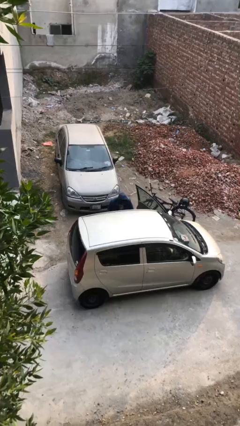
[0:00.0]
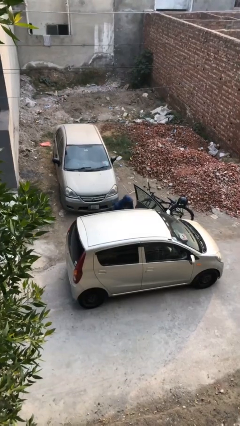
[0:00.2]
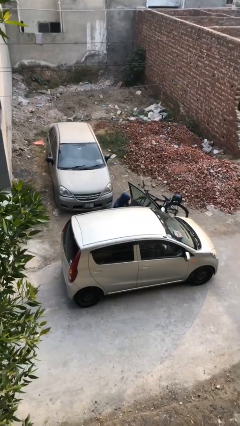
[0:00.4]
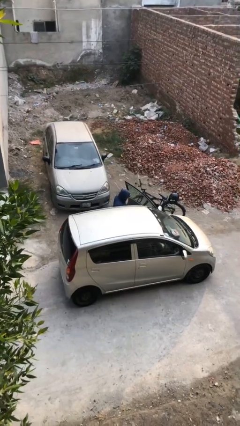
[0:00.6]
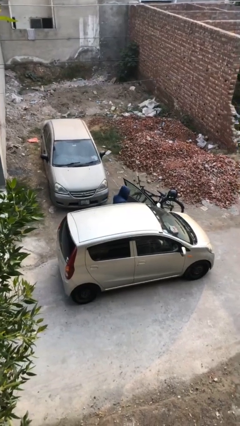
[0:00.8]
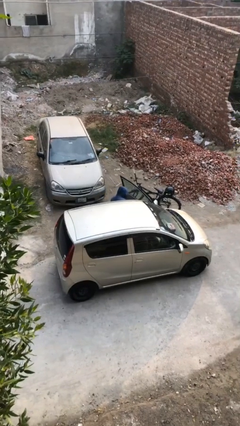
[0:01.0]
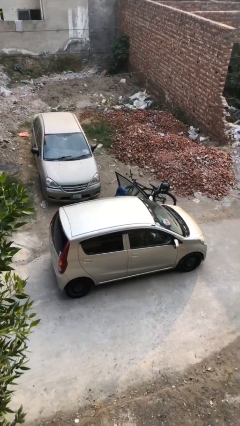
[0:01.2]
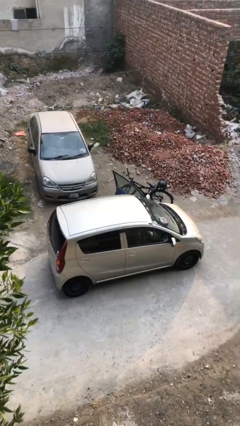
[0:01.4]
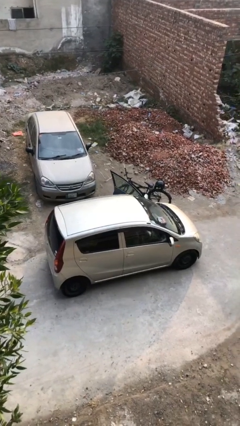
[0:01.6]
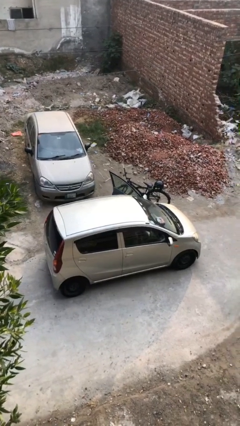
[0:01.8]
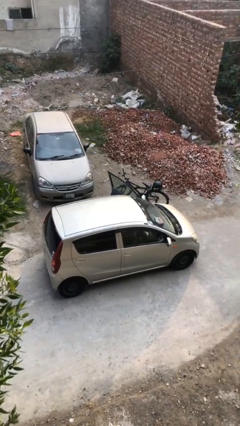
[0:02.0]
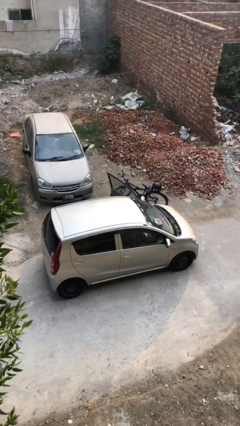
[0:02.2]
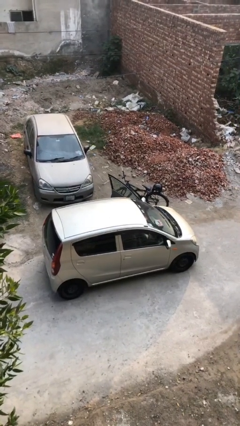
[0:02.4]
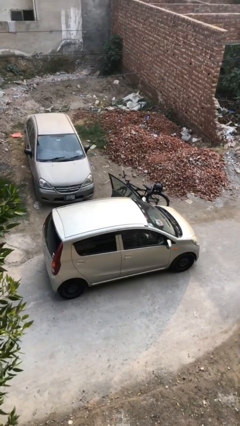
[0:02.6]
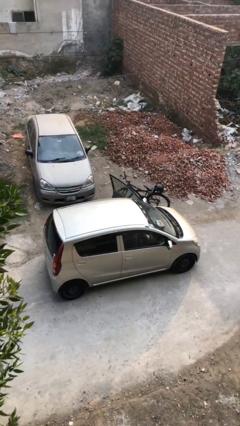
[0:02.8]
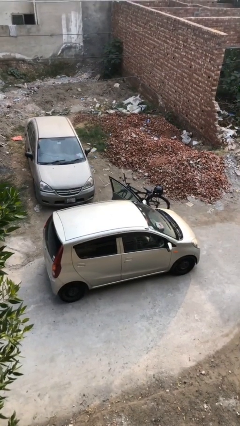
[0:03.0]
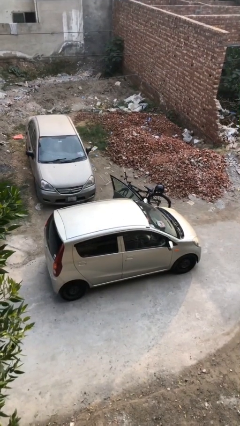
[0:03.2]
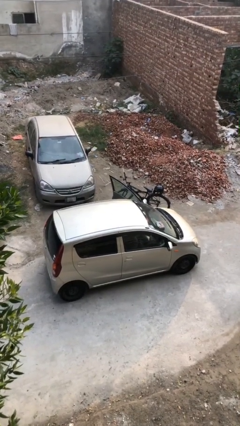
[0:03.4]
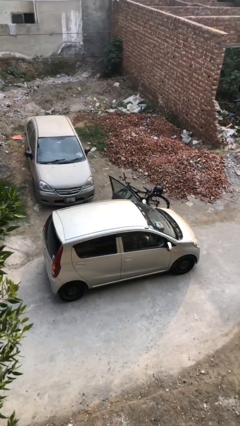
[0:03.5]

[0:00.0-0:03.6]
person enters car

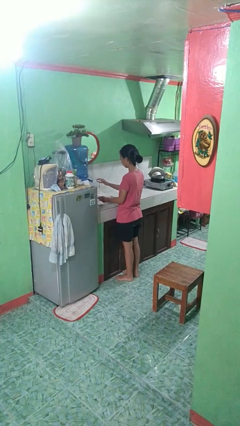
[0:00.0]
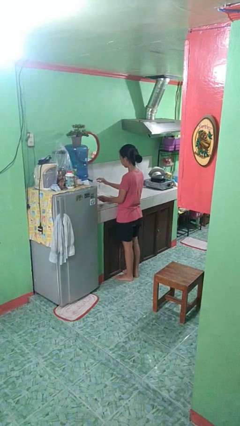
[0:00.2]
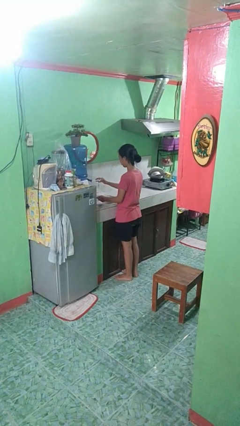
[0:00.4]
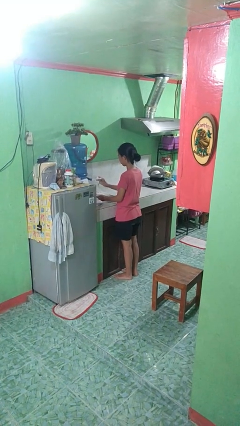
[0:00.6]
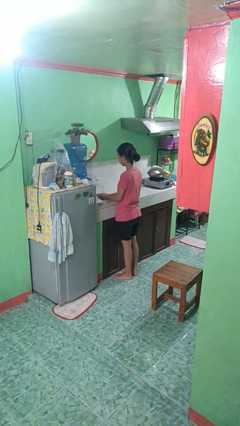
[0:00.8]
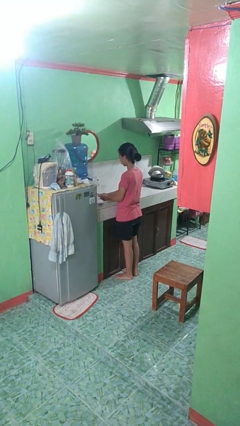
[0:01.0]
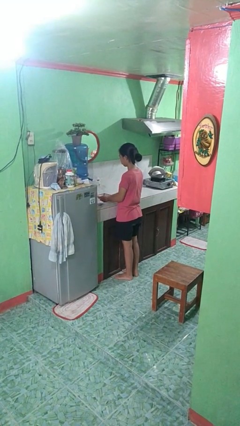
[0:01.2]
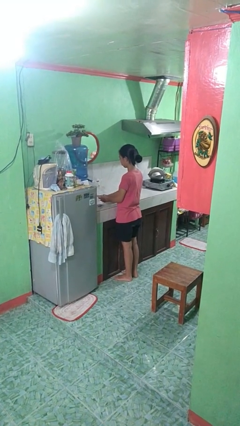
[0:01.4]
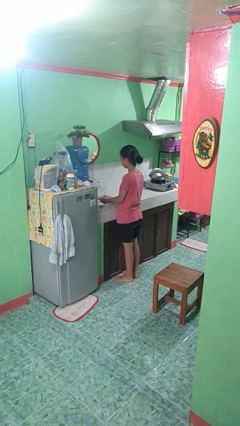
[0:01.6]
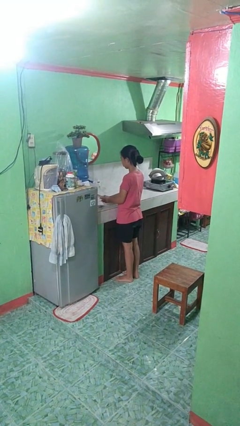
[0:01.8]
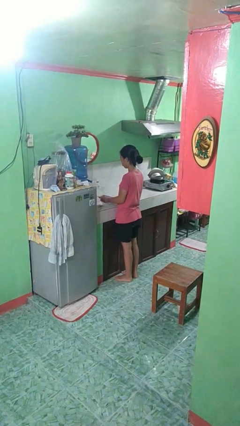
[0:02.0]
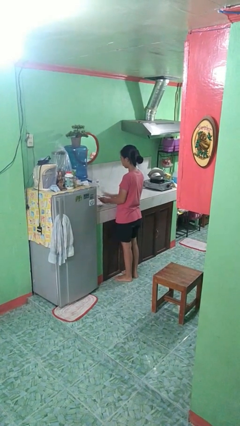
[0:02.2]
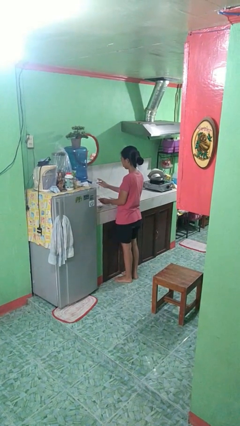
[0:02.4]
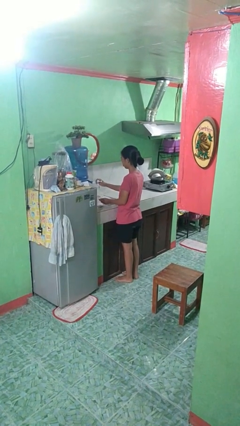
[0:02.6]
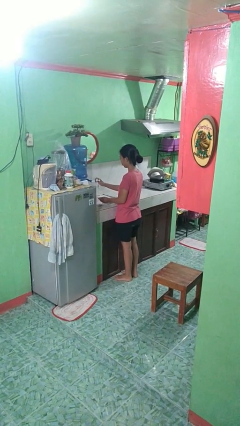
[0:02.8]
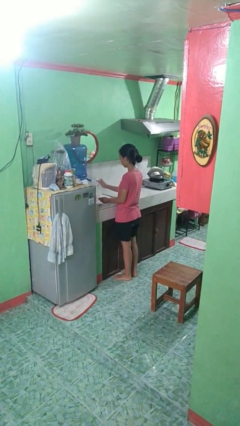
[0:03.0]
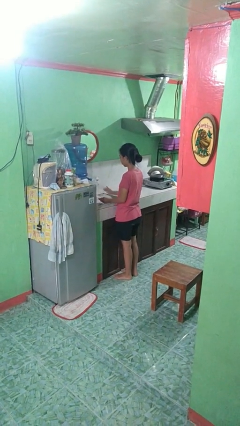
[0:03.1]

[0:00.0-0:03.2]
person washes dish

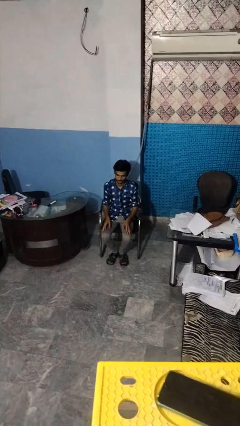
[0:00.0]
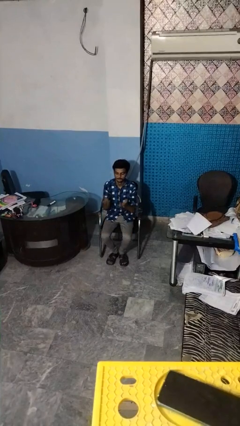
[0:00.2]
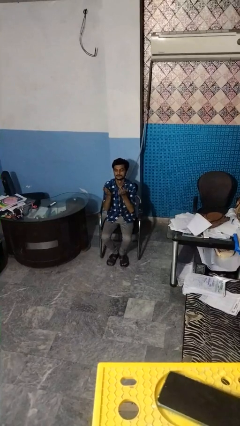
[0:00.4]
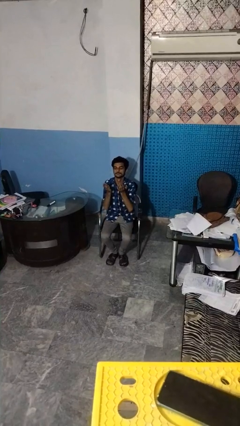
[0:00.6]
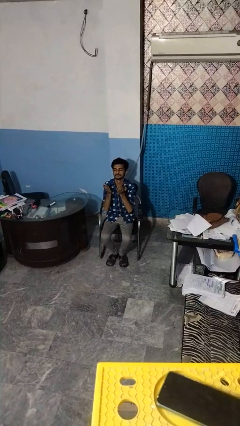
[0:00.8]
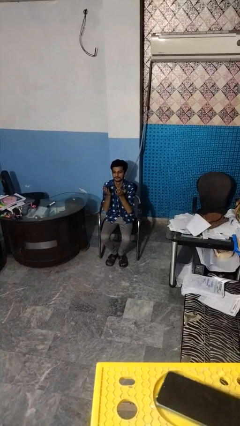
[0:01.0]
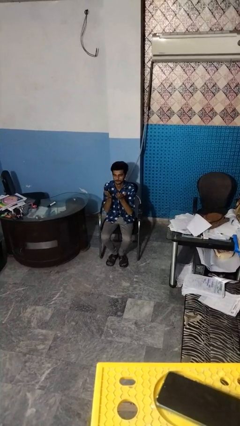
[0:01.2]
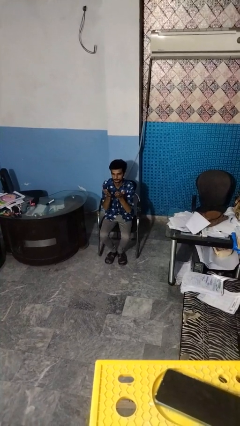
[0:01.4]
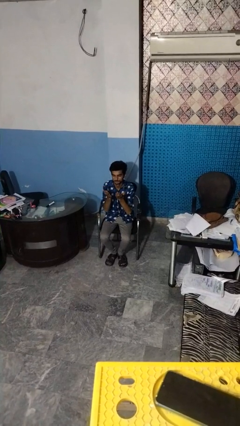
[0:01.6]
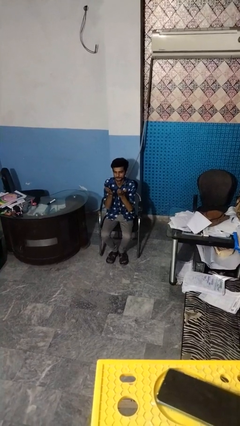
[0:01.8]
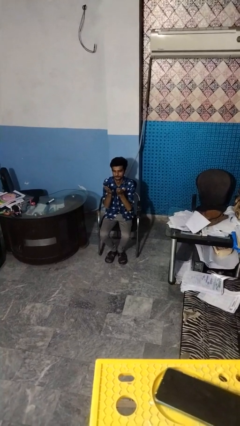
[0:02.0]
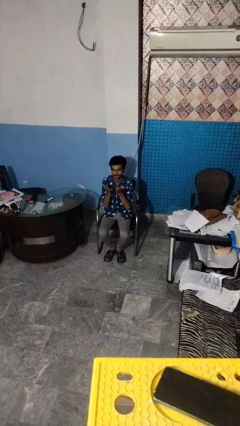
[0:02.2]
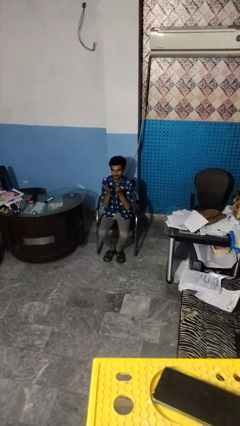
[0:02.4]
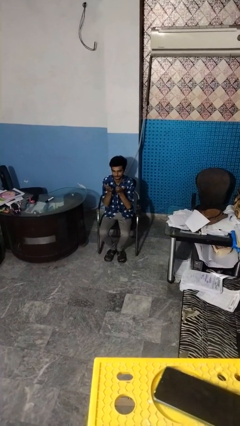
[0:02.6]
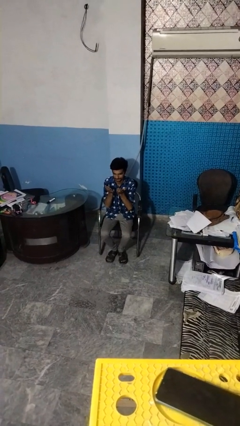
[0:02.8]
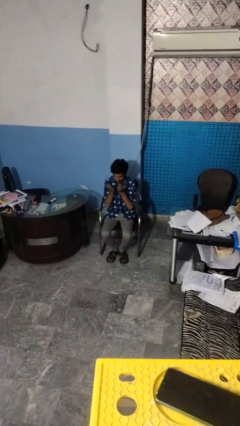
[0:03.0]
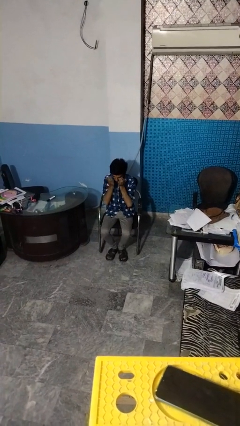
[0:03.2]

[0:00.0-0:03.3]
person prays

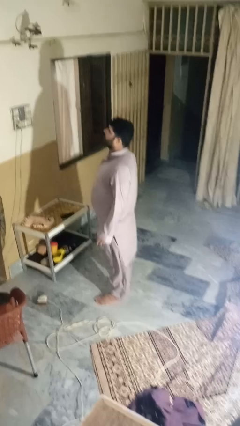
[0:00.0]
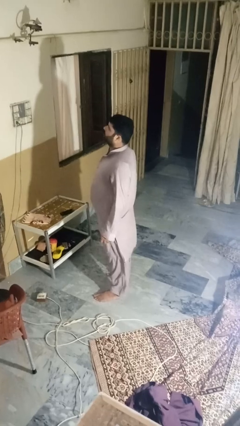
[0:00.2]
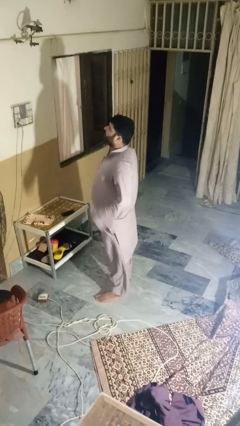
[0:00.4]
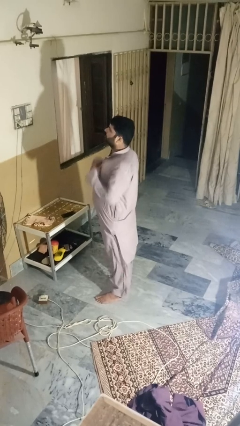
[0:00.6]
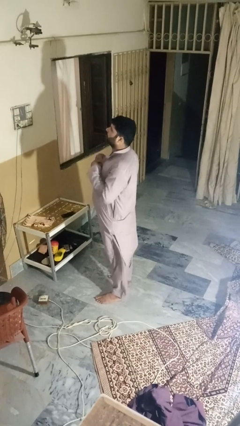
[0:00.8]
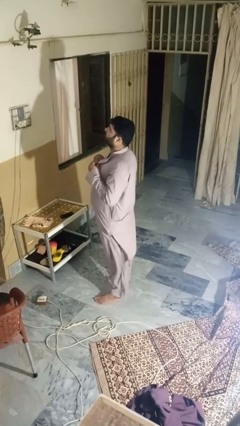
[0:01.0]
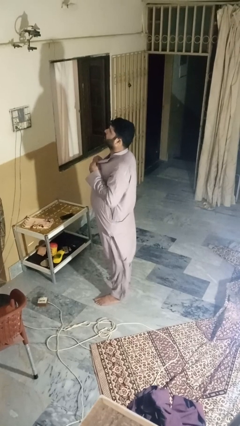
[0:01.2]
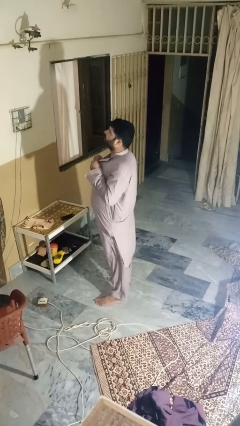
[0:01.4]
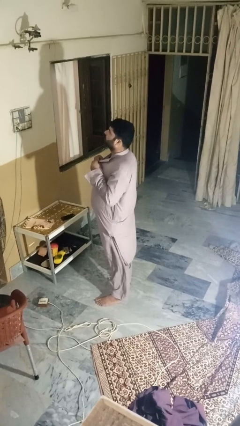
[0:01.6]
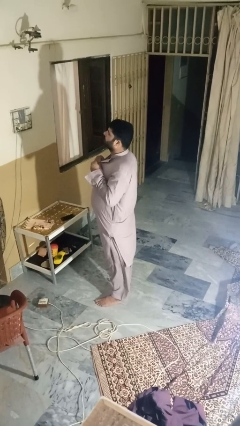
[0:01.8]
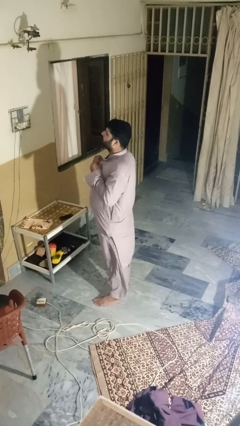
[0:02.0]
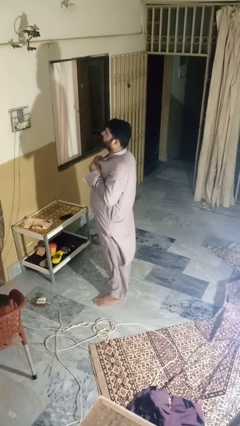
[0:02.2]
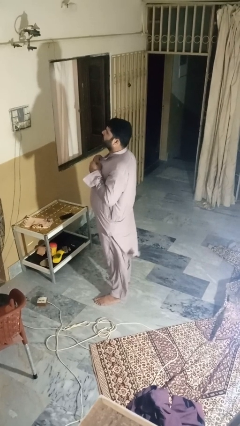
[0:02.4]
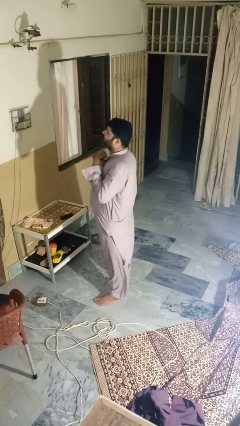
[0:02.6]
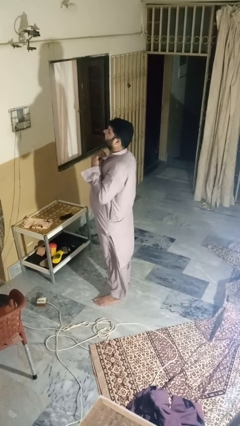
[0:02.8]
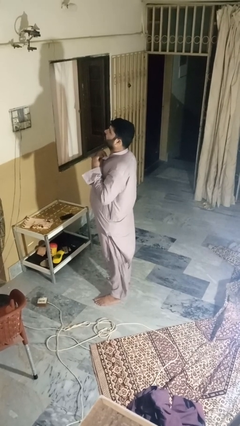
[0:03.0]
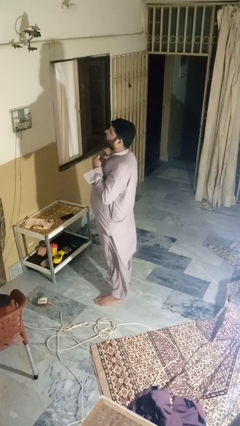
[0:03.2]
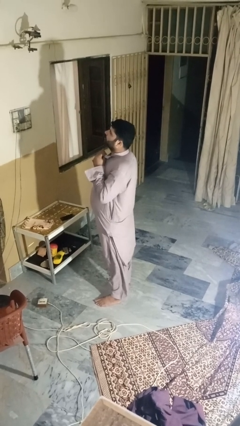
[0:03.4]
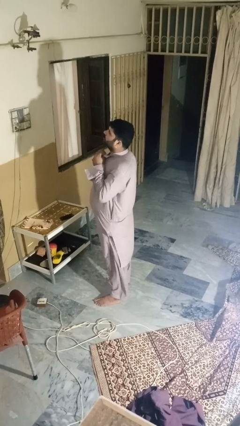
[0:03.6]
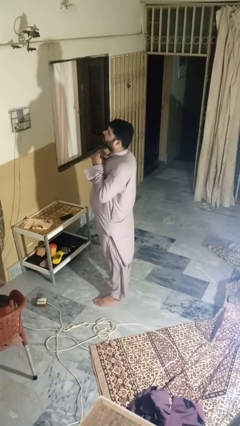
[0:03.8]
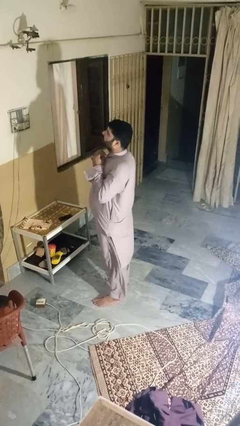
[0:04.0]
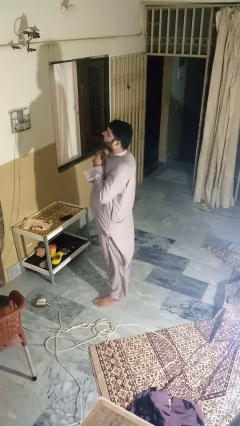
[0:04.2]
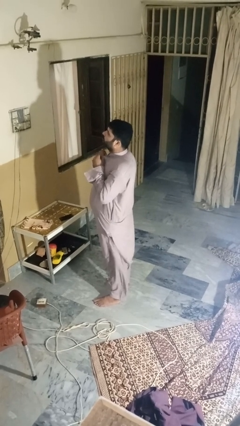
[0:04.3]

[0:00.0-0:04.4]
person buttons shirt

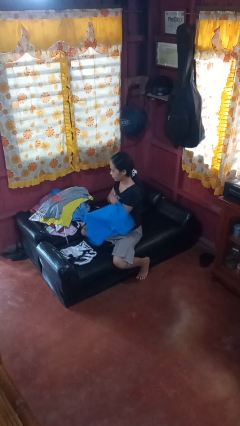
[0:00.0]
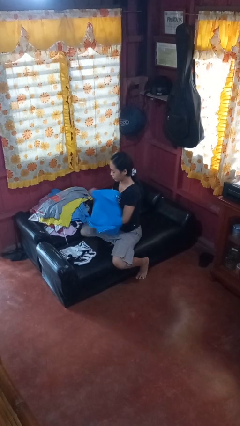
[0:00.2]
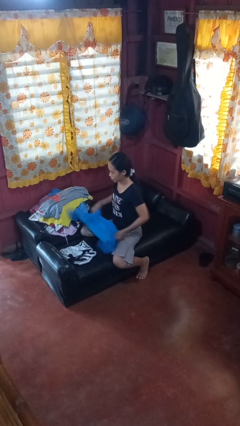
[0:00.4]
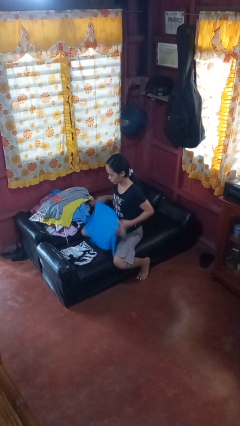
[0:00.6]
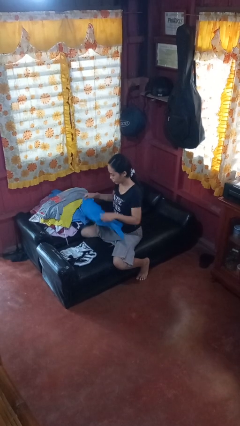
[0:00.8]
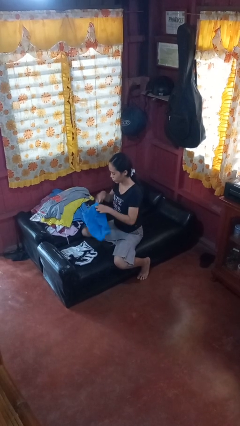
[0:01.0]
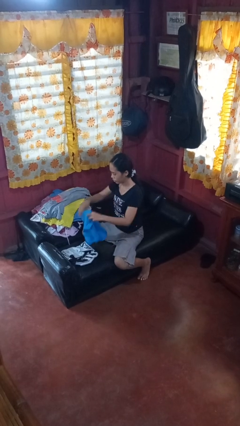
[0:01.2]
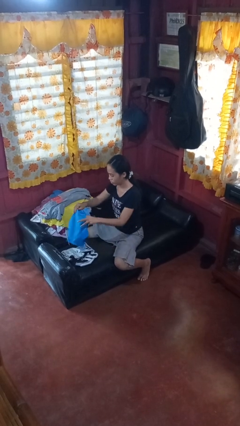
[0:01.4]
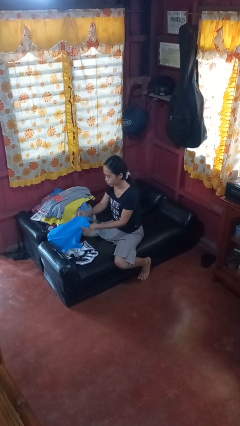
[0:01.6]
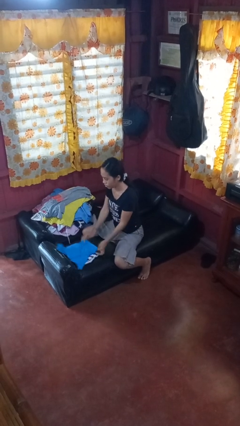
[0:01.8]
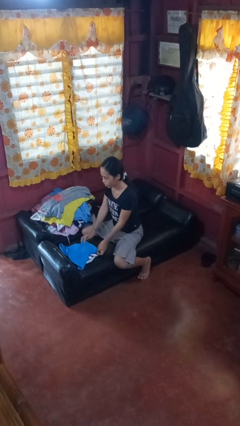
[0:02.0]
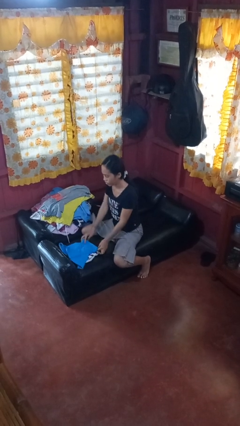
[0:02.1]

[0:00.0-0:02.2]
person folds shirt

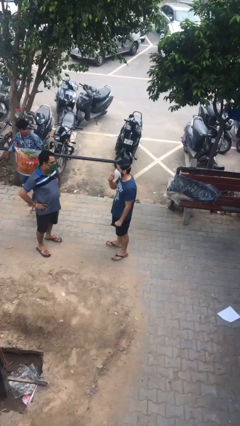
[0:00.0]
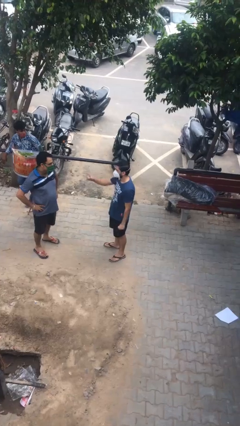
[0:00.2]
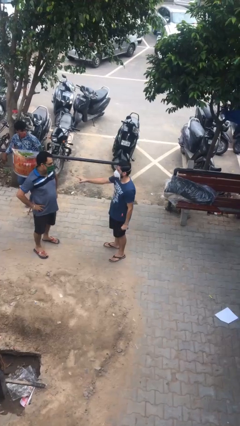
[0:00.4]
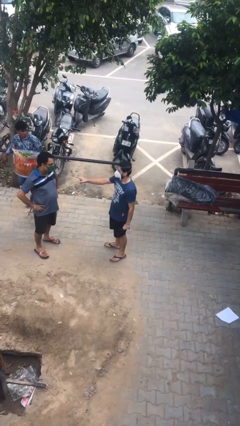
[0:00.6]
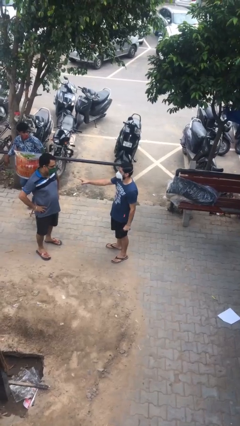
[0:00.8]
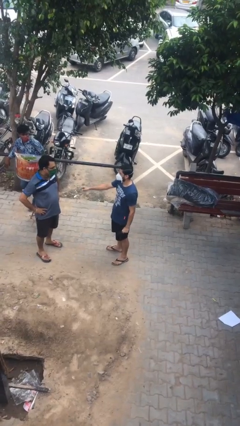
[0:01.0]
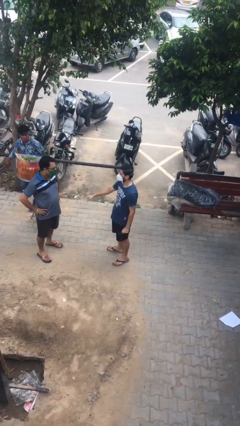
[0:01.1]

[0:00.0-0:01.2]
person points at person
